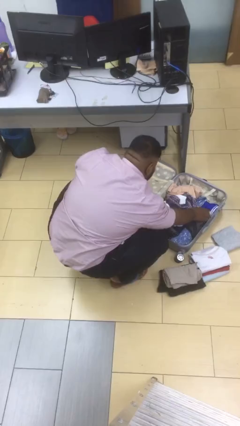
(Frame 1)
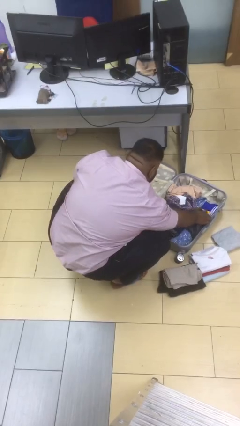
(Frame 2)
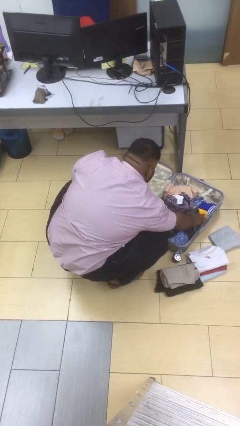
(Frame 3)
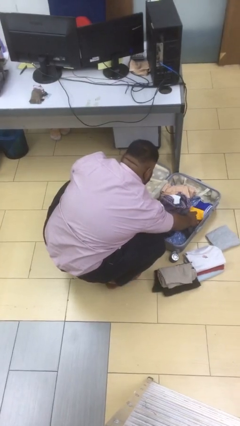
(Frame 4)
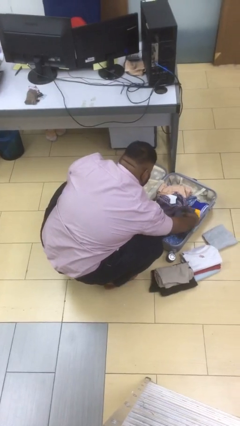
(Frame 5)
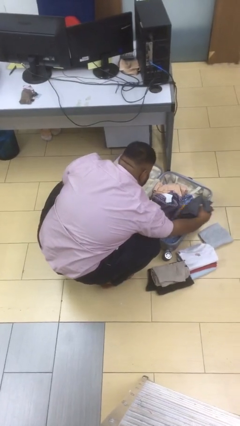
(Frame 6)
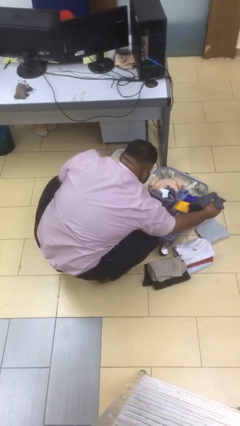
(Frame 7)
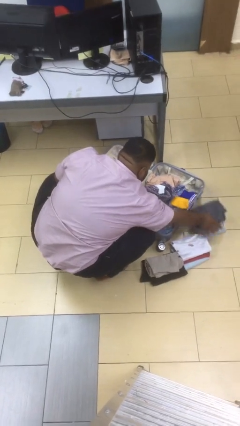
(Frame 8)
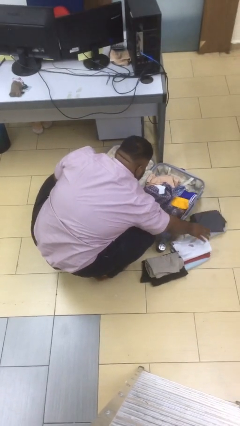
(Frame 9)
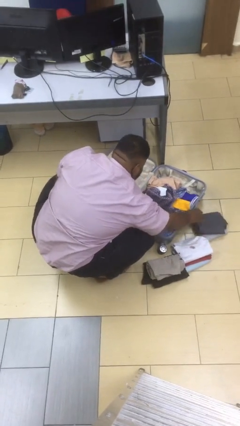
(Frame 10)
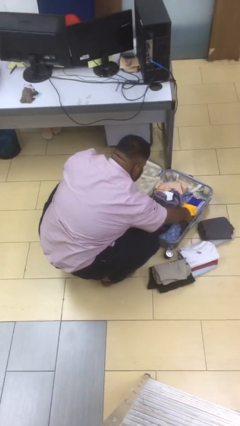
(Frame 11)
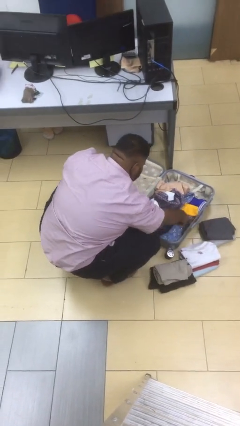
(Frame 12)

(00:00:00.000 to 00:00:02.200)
person unloads clothes from suitcase

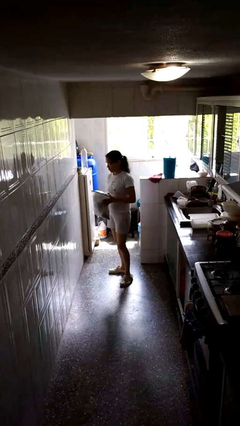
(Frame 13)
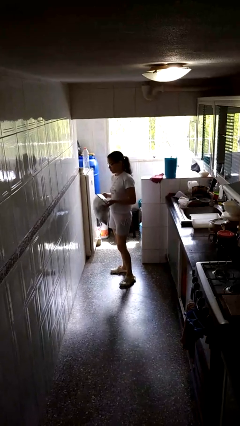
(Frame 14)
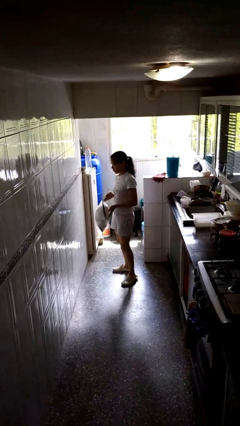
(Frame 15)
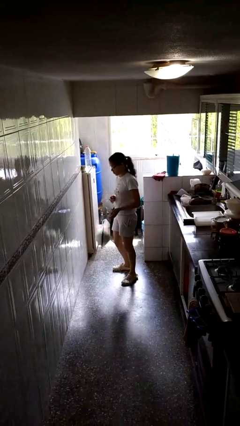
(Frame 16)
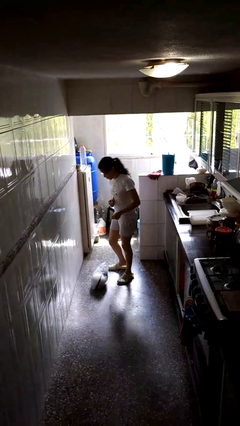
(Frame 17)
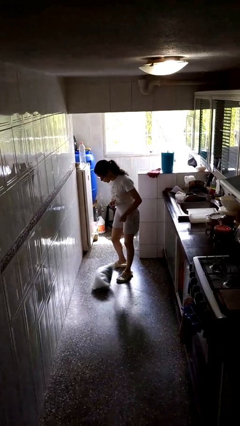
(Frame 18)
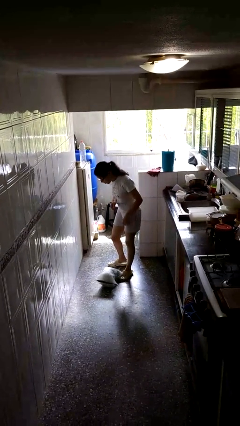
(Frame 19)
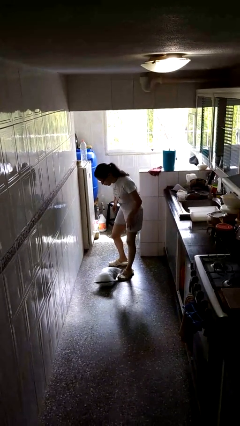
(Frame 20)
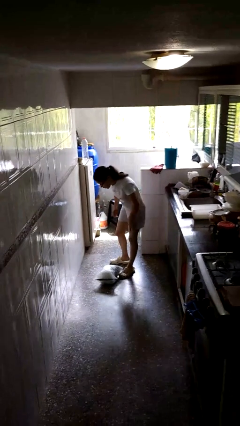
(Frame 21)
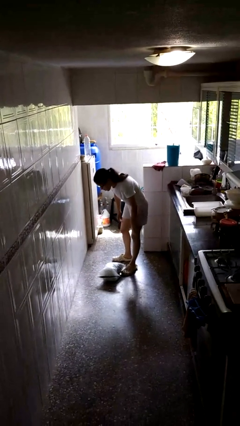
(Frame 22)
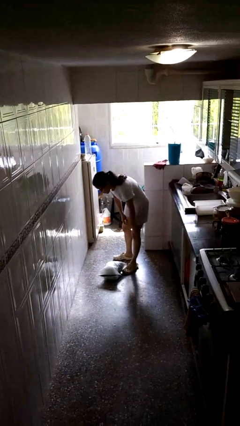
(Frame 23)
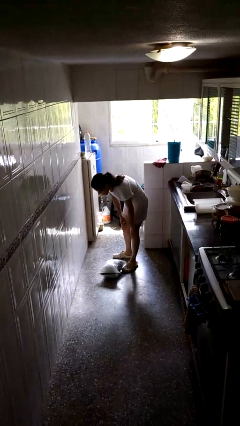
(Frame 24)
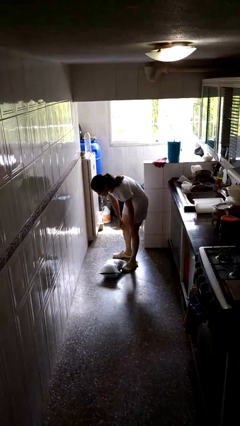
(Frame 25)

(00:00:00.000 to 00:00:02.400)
person drops object

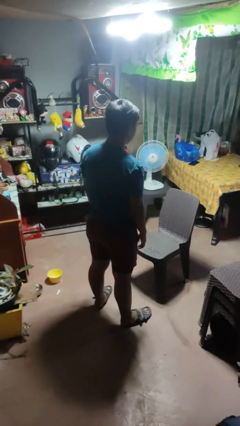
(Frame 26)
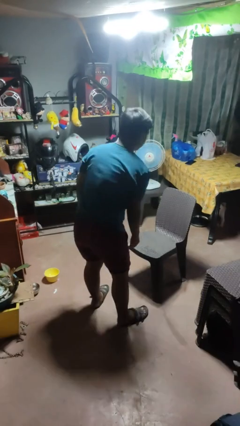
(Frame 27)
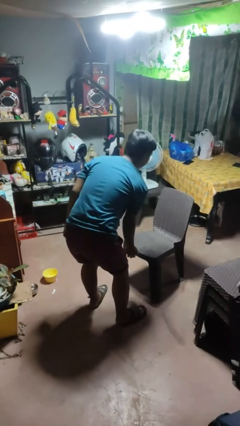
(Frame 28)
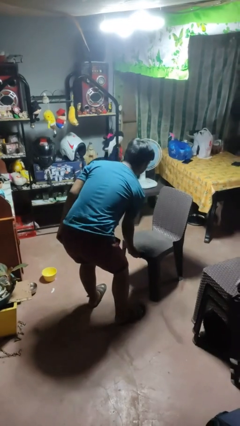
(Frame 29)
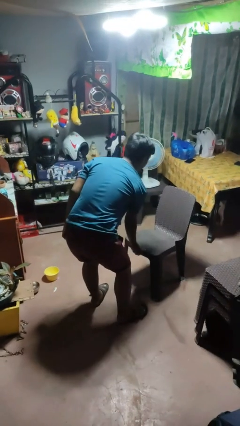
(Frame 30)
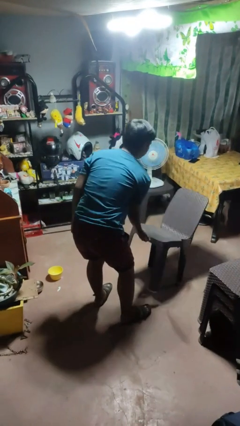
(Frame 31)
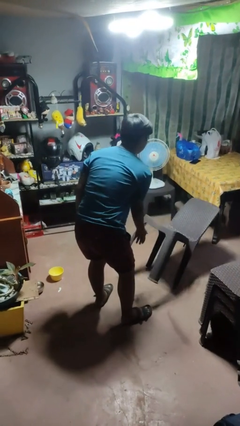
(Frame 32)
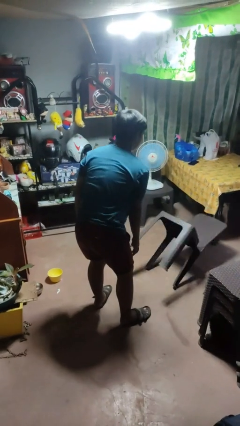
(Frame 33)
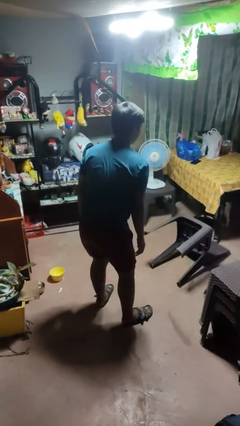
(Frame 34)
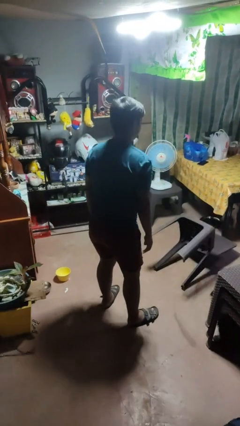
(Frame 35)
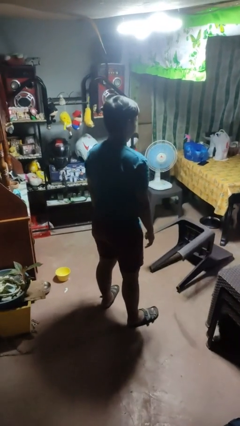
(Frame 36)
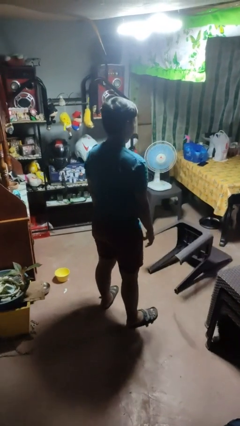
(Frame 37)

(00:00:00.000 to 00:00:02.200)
person knocks over furniture

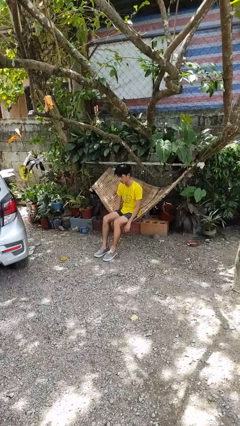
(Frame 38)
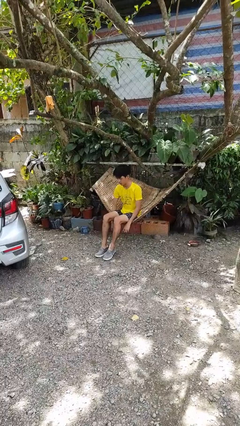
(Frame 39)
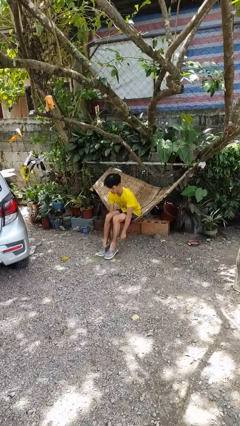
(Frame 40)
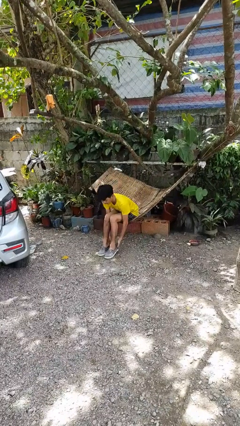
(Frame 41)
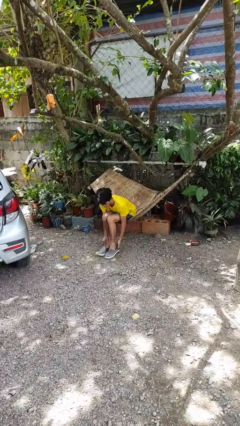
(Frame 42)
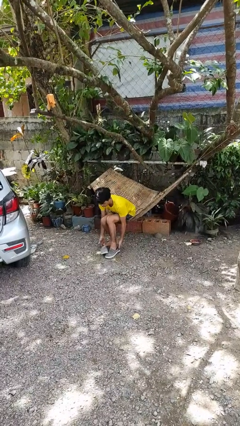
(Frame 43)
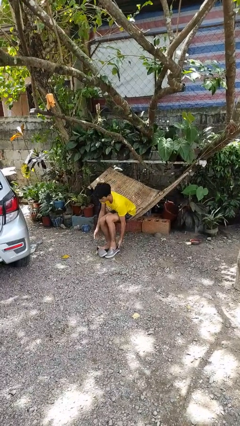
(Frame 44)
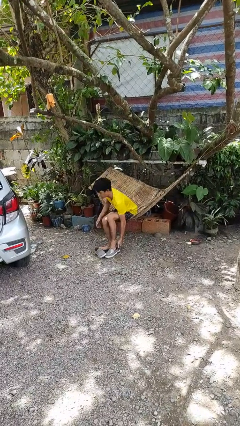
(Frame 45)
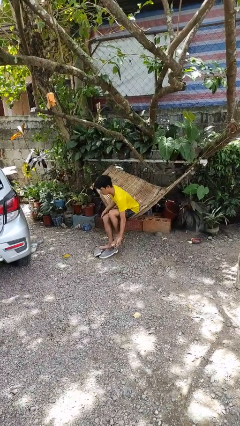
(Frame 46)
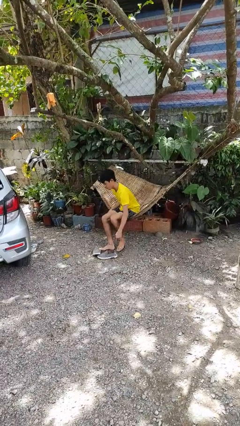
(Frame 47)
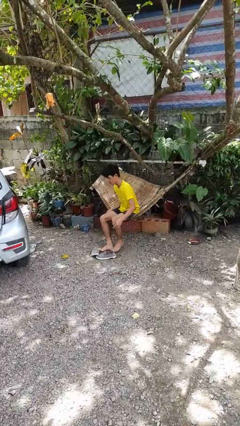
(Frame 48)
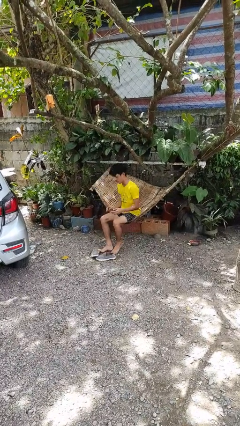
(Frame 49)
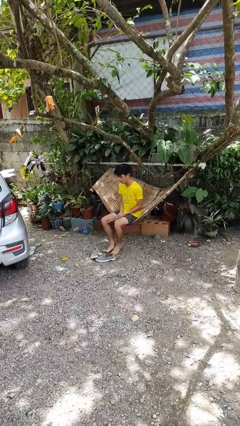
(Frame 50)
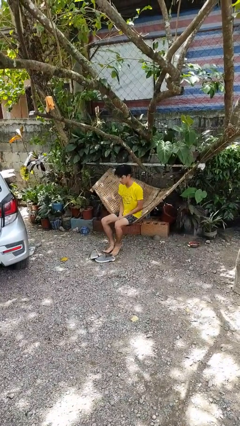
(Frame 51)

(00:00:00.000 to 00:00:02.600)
person takes off shoes

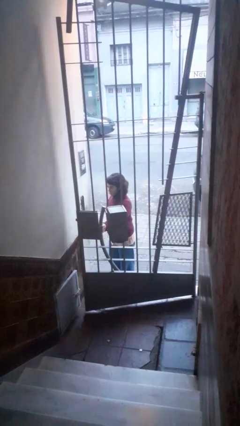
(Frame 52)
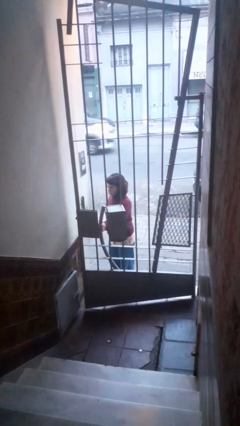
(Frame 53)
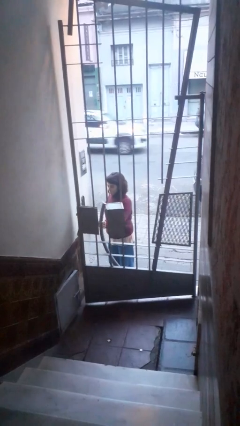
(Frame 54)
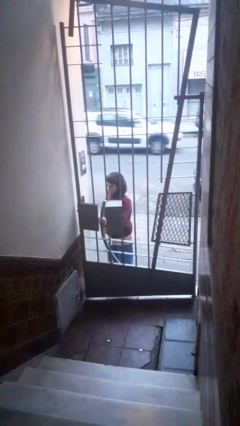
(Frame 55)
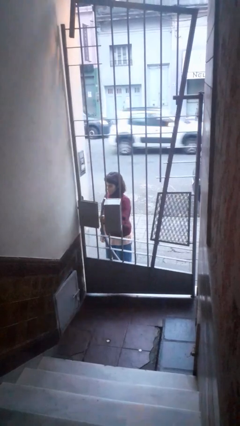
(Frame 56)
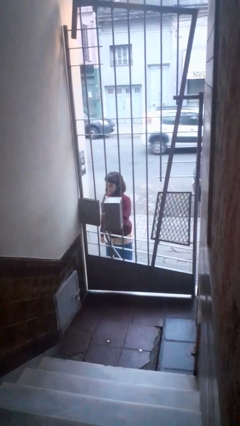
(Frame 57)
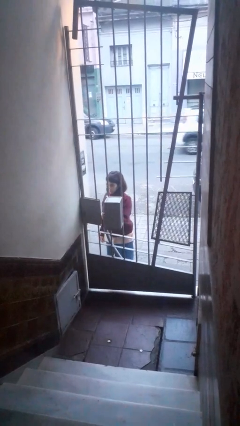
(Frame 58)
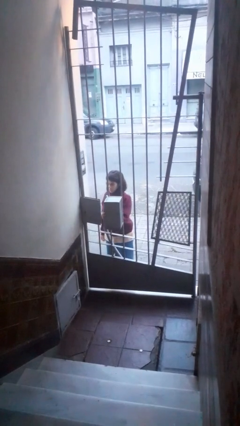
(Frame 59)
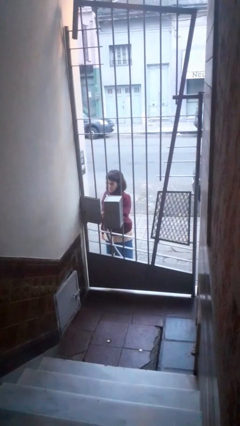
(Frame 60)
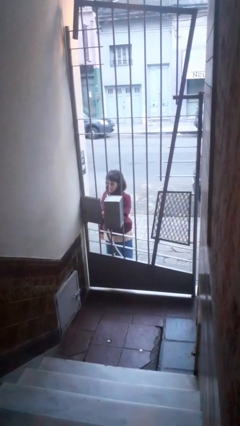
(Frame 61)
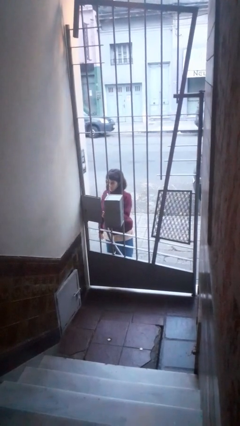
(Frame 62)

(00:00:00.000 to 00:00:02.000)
person closes gate

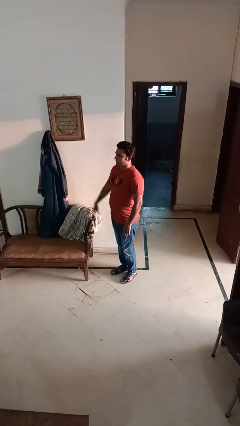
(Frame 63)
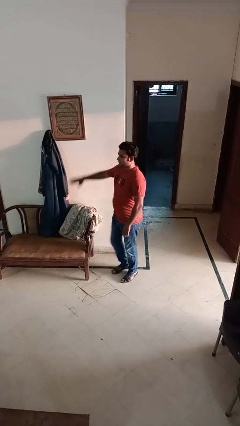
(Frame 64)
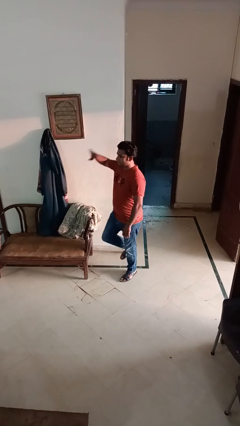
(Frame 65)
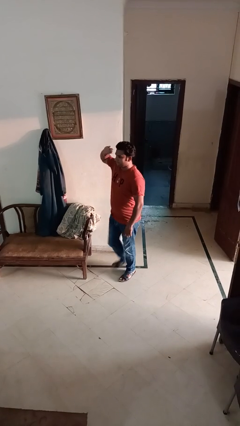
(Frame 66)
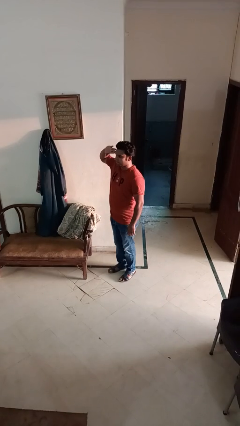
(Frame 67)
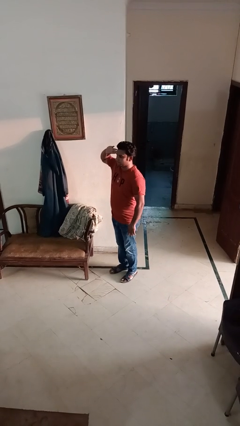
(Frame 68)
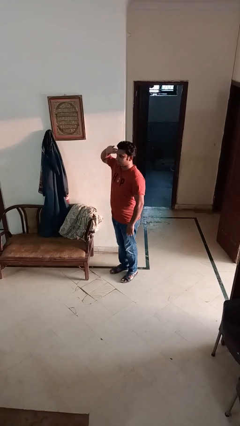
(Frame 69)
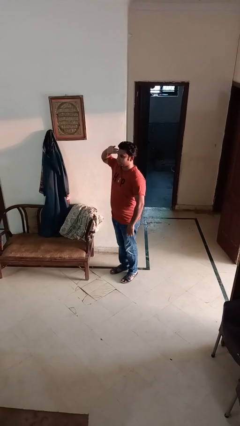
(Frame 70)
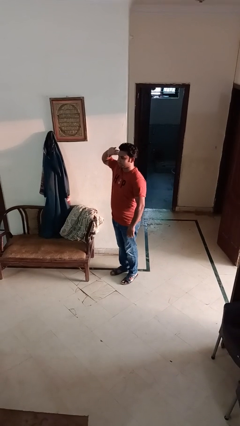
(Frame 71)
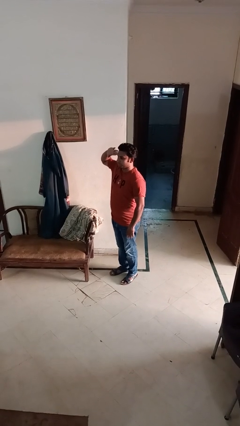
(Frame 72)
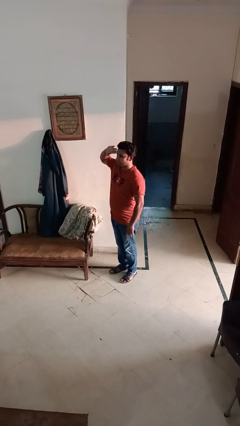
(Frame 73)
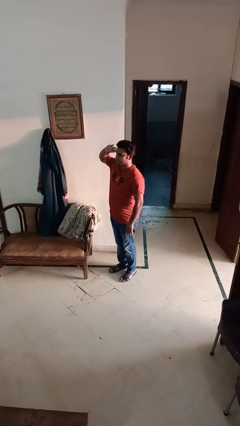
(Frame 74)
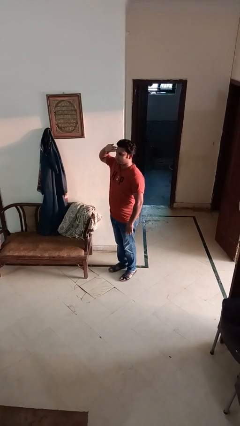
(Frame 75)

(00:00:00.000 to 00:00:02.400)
person salutes

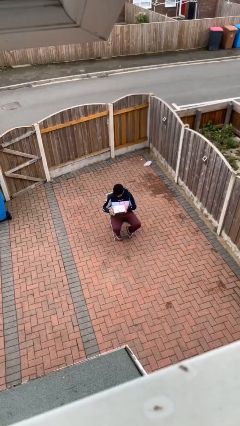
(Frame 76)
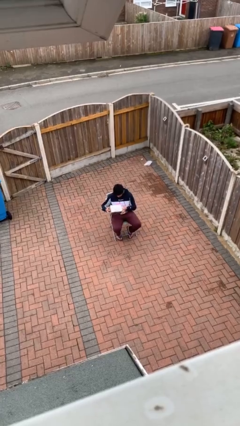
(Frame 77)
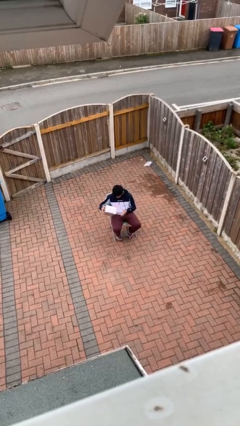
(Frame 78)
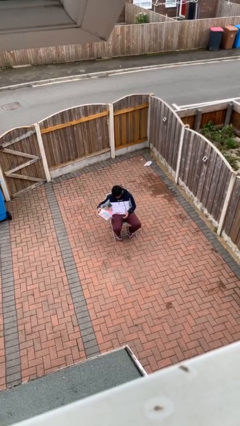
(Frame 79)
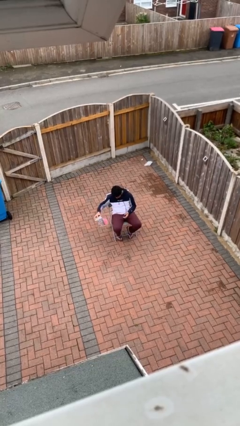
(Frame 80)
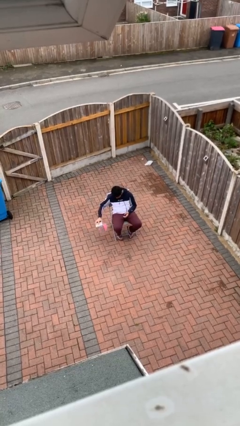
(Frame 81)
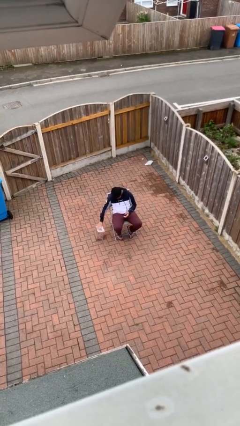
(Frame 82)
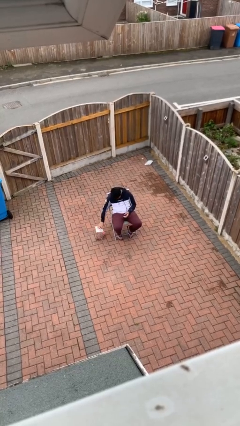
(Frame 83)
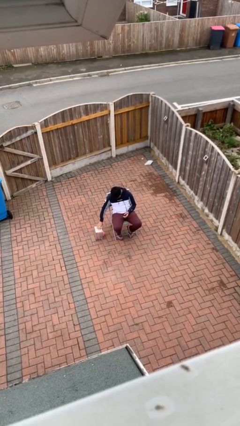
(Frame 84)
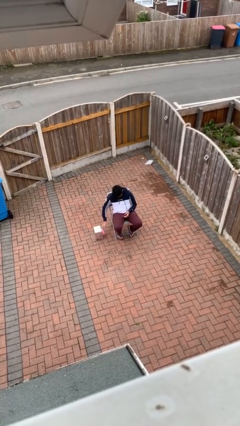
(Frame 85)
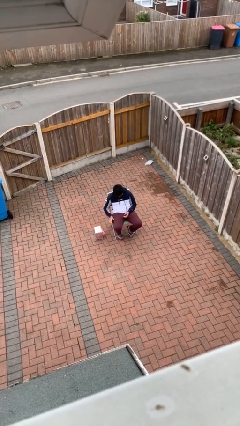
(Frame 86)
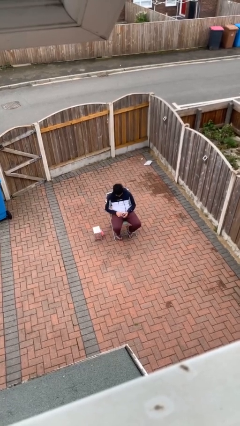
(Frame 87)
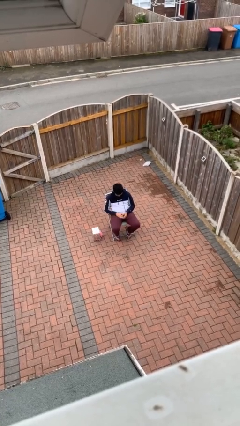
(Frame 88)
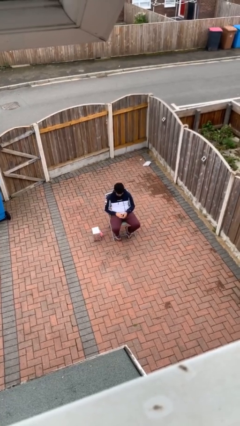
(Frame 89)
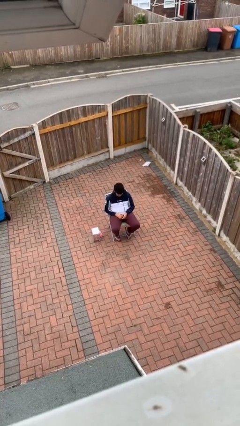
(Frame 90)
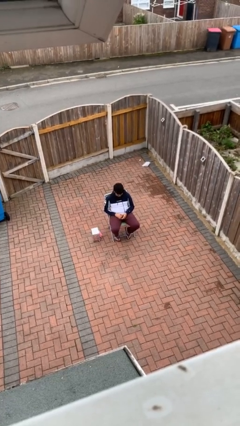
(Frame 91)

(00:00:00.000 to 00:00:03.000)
person puts down object on floor

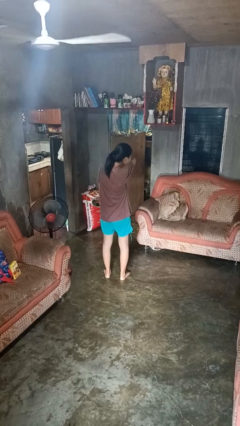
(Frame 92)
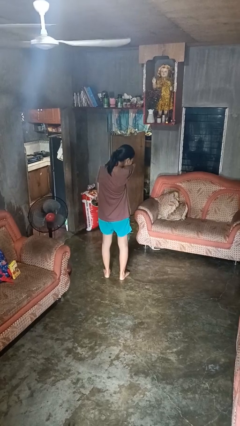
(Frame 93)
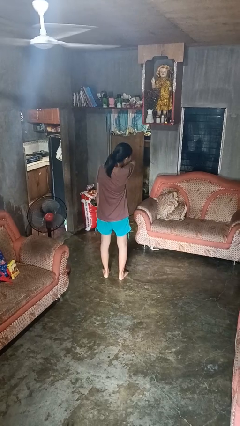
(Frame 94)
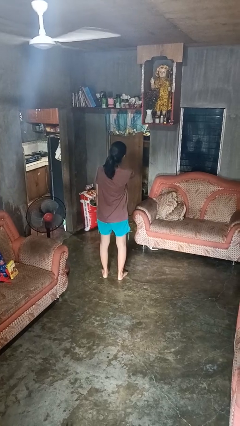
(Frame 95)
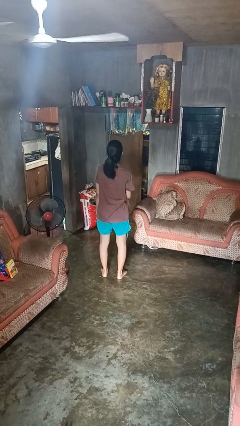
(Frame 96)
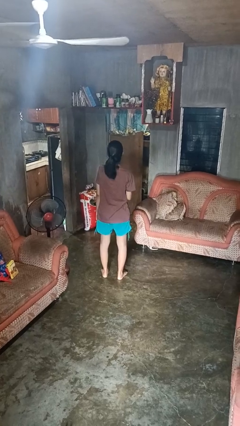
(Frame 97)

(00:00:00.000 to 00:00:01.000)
person sneezes into arm
